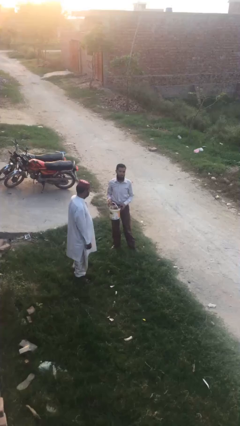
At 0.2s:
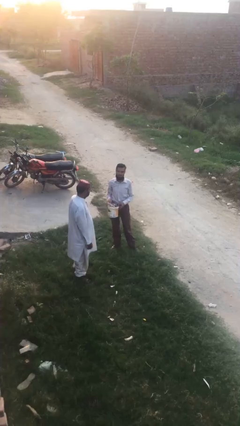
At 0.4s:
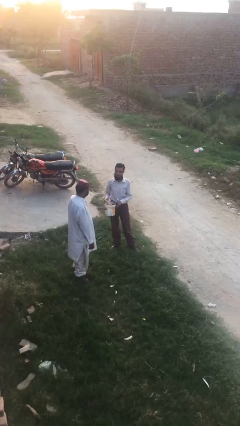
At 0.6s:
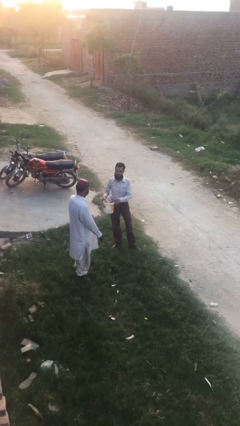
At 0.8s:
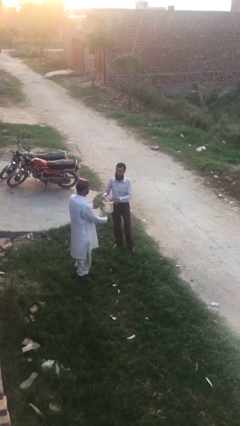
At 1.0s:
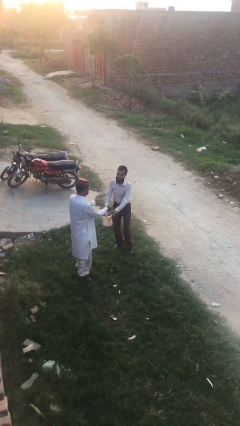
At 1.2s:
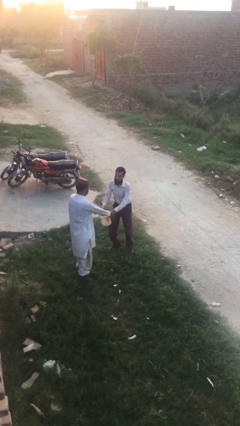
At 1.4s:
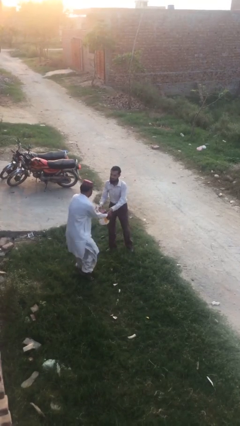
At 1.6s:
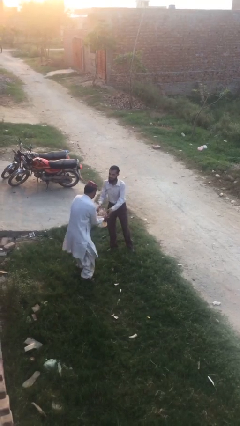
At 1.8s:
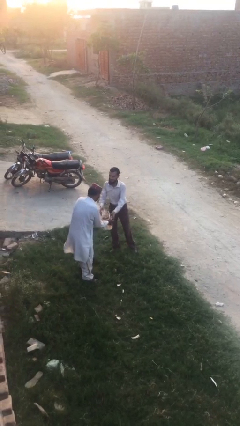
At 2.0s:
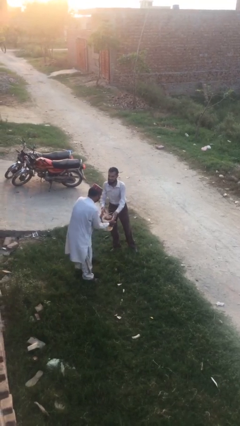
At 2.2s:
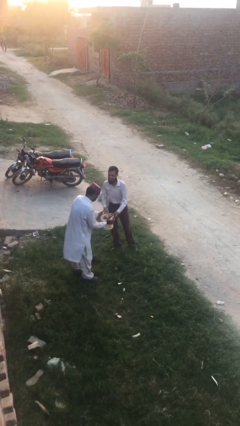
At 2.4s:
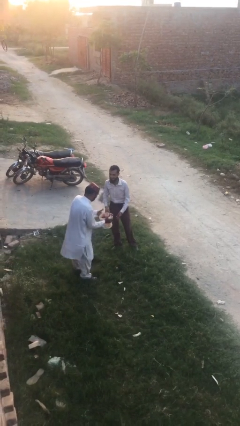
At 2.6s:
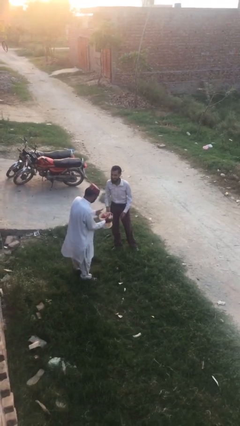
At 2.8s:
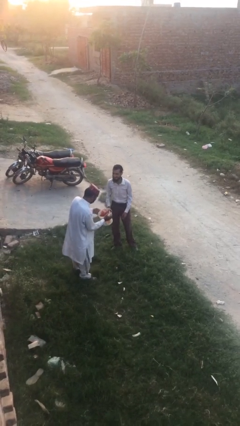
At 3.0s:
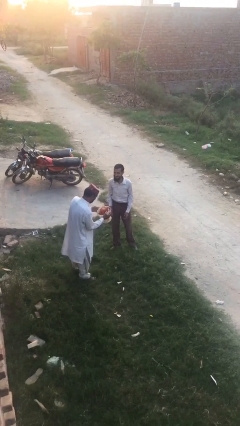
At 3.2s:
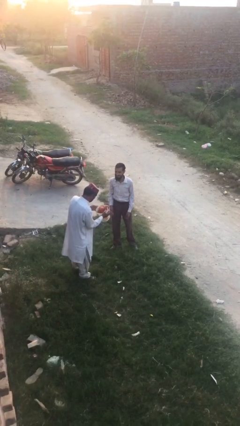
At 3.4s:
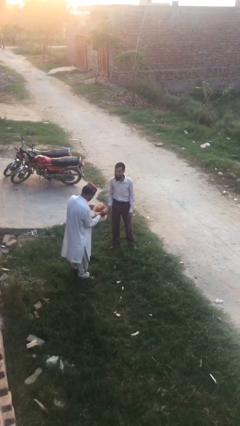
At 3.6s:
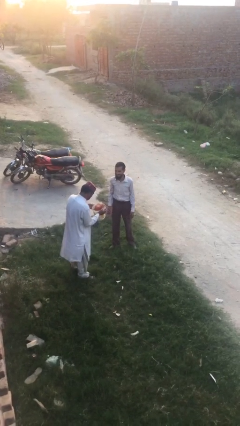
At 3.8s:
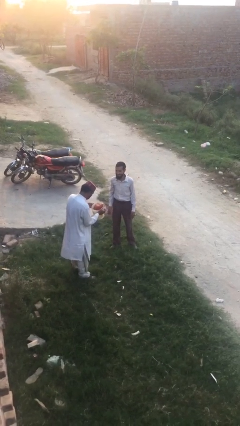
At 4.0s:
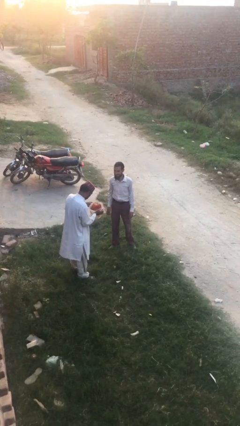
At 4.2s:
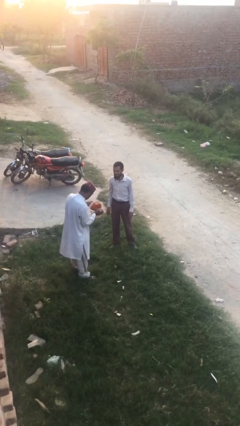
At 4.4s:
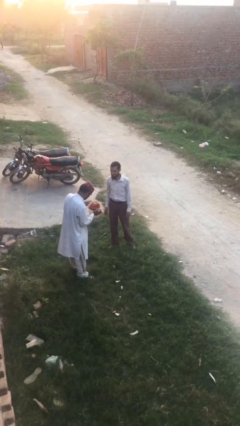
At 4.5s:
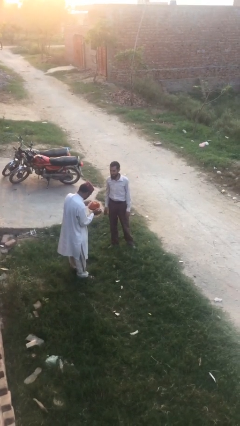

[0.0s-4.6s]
person transfers object to person

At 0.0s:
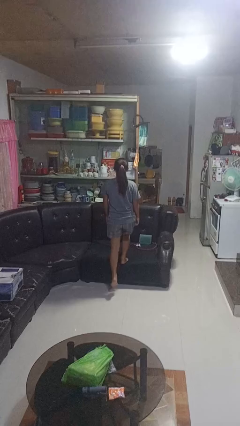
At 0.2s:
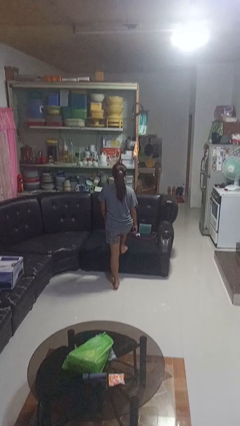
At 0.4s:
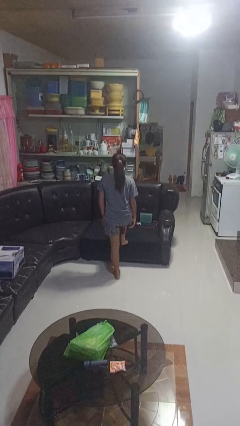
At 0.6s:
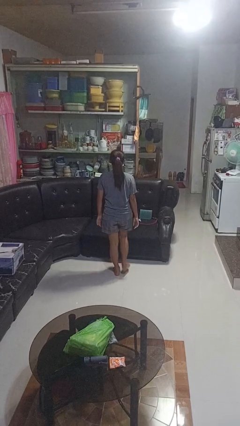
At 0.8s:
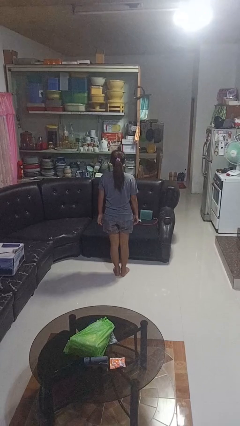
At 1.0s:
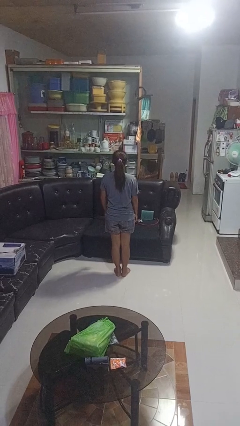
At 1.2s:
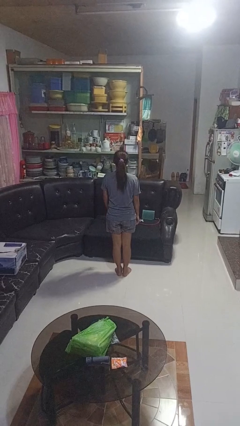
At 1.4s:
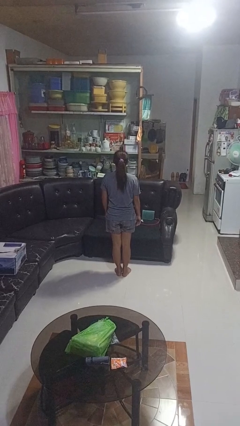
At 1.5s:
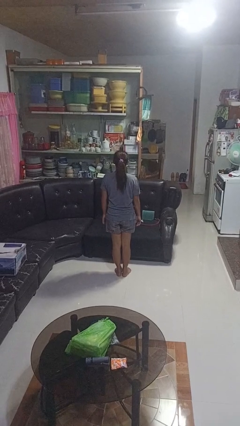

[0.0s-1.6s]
person climbs off couch

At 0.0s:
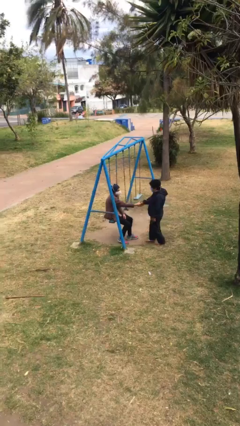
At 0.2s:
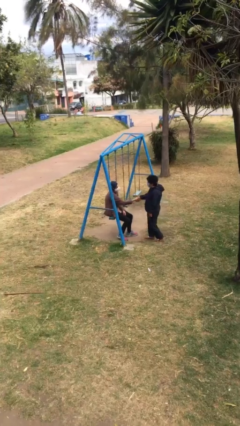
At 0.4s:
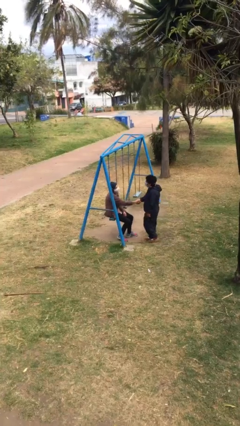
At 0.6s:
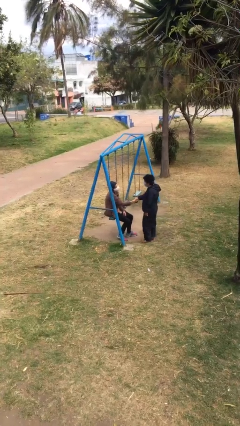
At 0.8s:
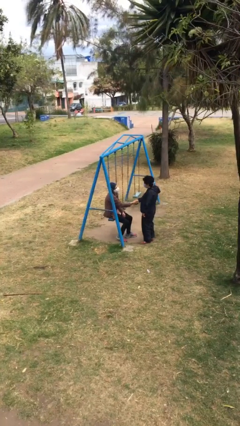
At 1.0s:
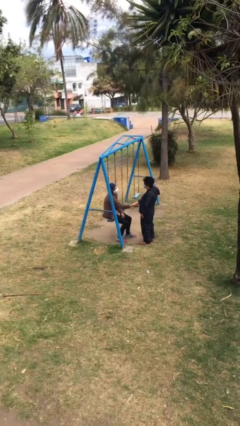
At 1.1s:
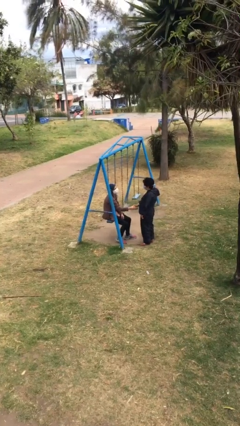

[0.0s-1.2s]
person shakes hand

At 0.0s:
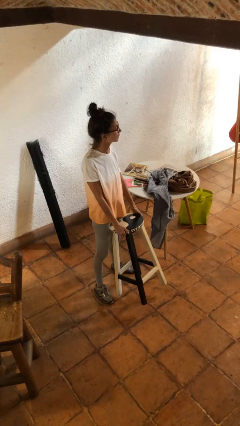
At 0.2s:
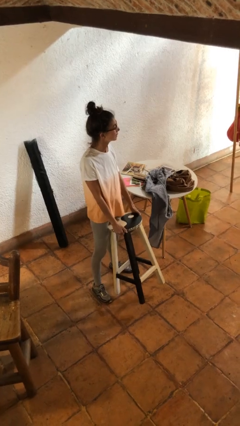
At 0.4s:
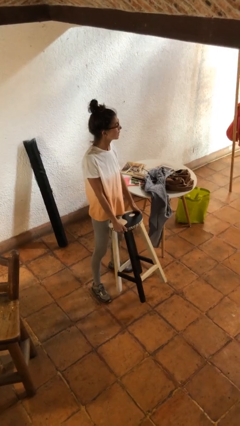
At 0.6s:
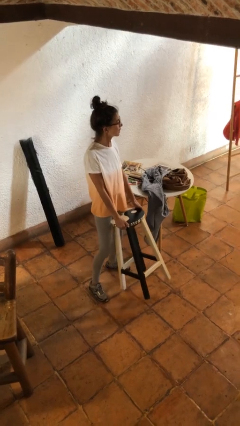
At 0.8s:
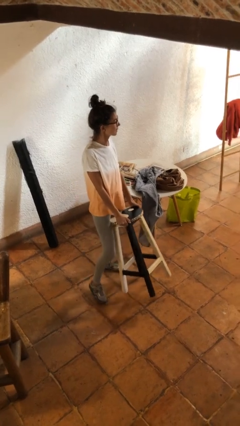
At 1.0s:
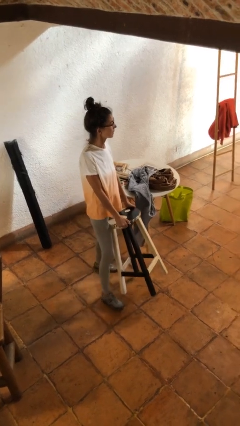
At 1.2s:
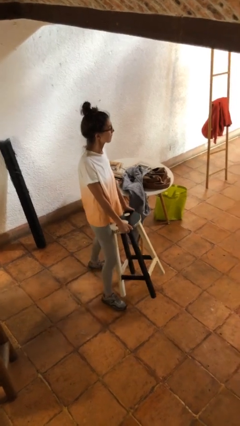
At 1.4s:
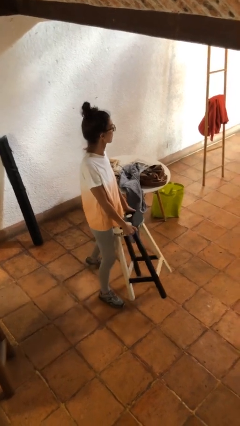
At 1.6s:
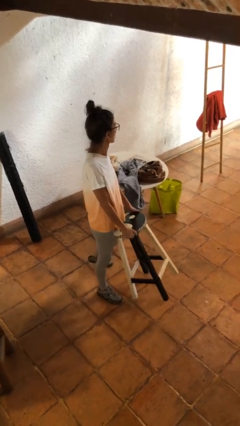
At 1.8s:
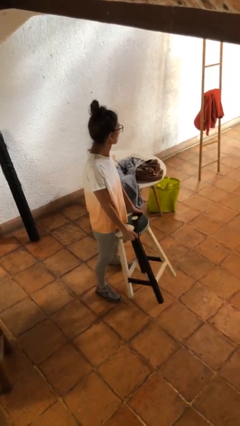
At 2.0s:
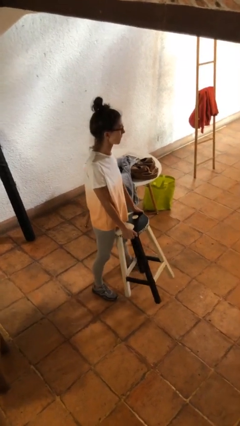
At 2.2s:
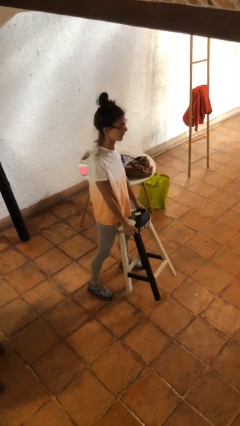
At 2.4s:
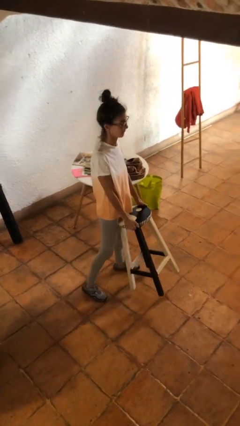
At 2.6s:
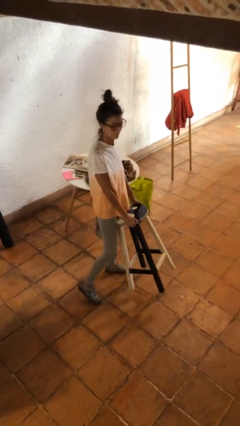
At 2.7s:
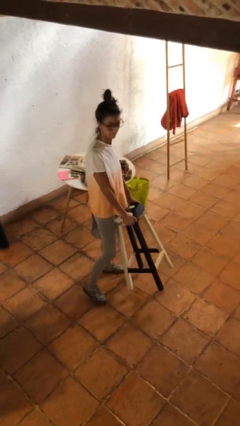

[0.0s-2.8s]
person carries furniture

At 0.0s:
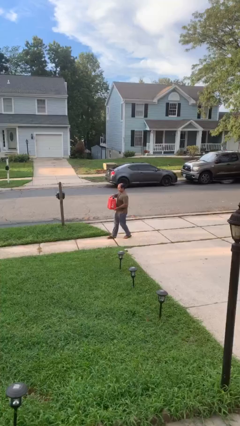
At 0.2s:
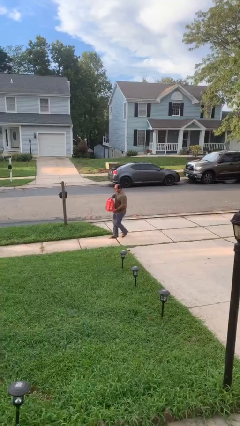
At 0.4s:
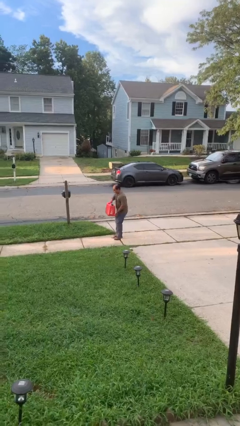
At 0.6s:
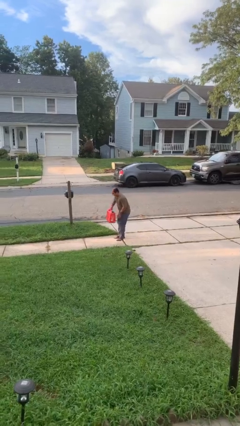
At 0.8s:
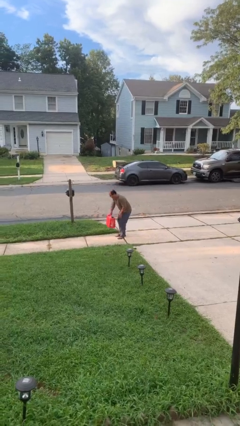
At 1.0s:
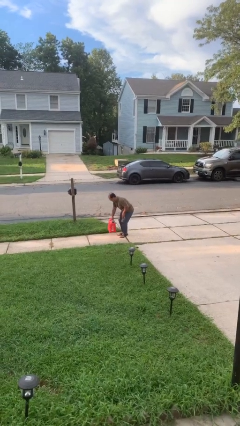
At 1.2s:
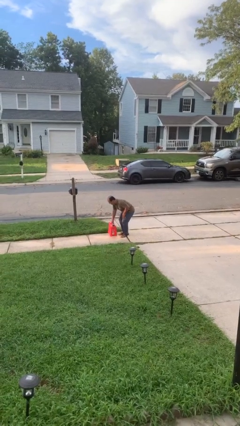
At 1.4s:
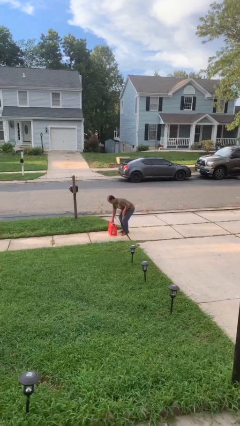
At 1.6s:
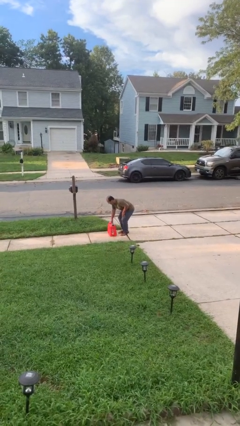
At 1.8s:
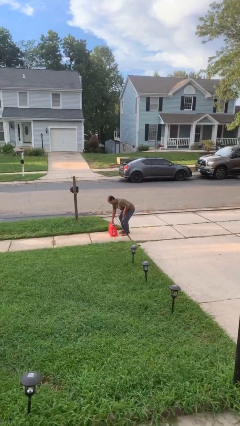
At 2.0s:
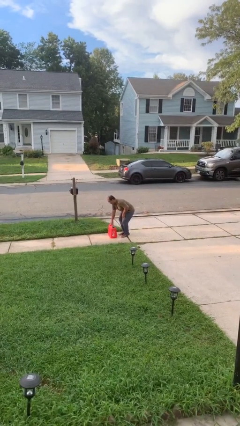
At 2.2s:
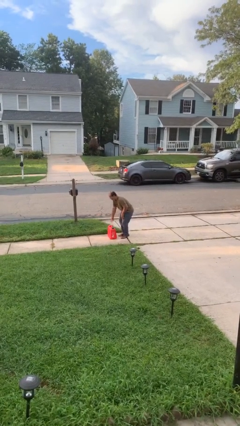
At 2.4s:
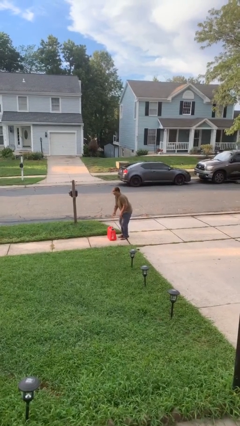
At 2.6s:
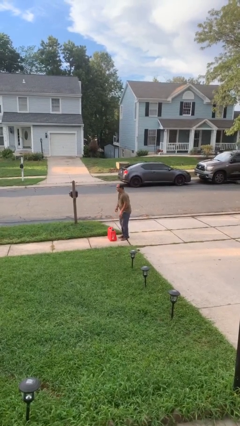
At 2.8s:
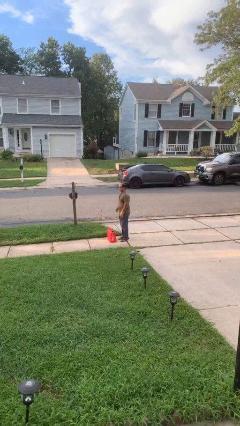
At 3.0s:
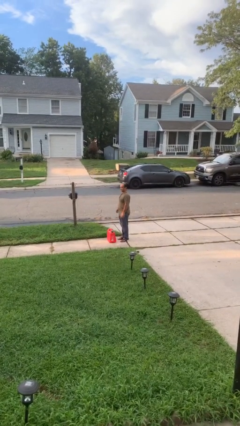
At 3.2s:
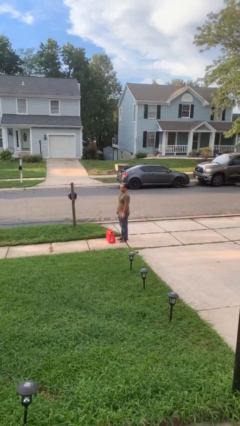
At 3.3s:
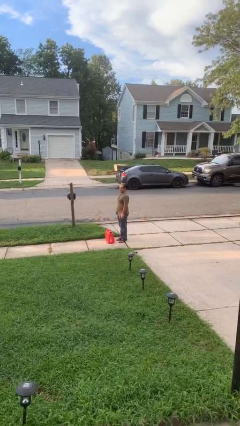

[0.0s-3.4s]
person puts down object on floor

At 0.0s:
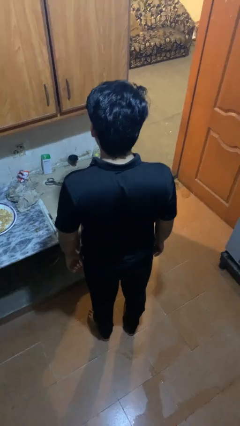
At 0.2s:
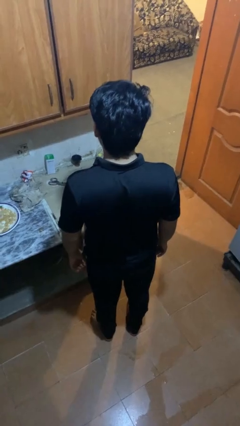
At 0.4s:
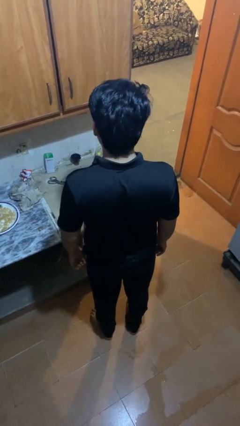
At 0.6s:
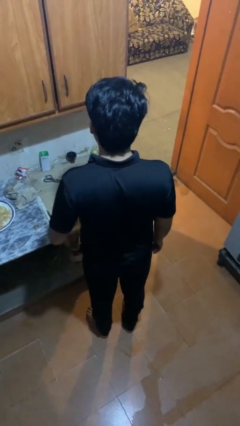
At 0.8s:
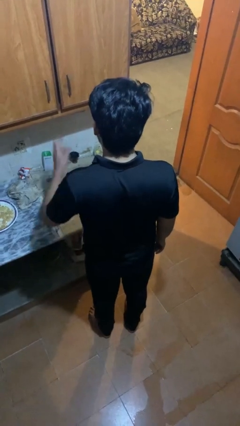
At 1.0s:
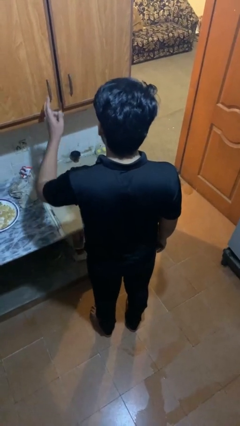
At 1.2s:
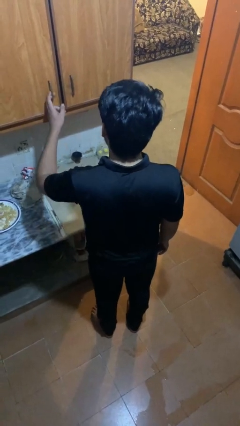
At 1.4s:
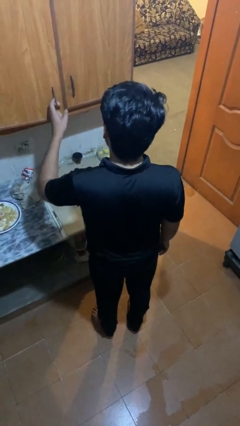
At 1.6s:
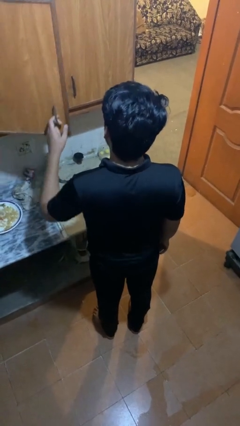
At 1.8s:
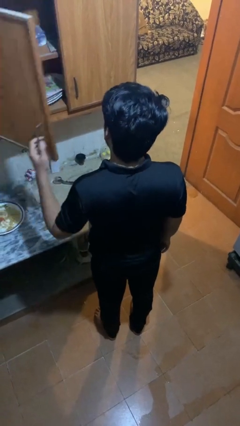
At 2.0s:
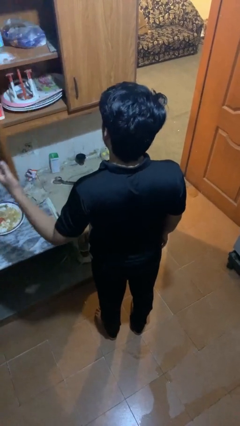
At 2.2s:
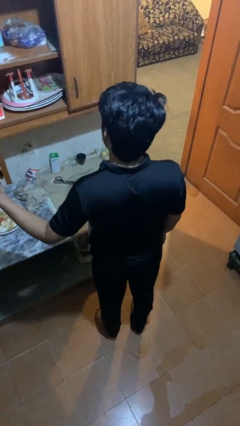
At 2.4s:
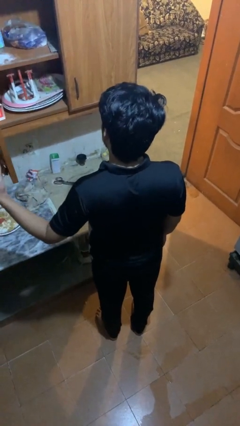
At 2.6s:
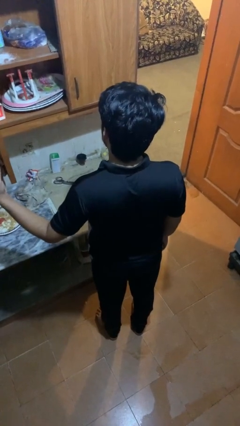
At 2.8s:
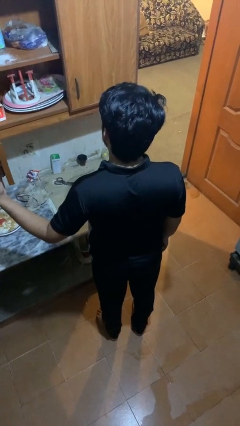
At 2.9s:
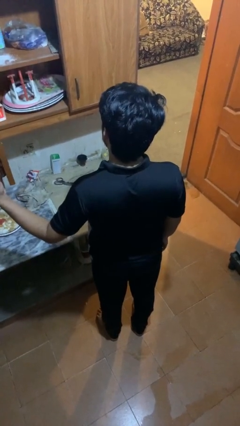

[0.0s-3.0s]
person opens cabinet

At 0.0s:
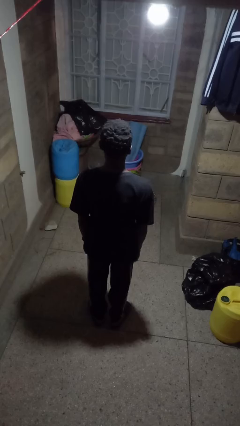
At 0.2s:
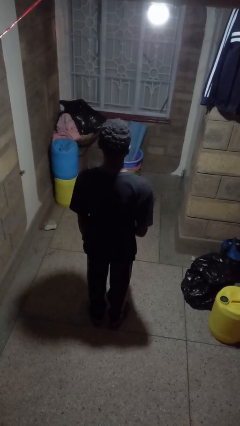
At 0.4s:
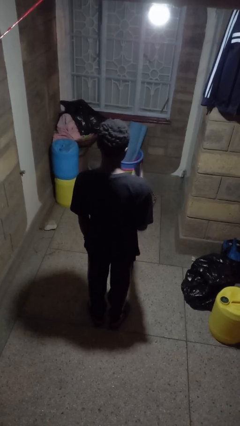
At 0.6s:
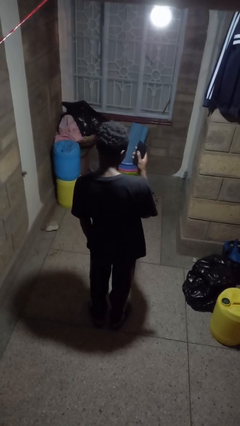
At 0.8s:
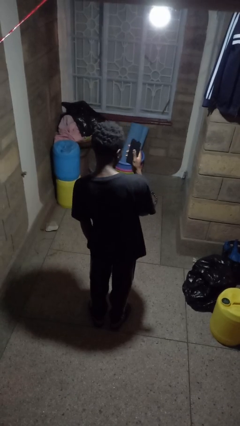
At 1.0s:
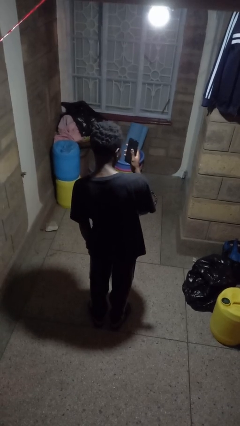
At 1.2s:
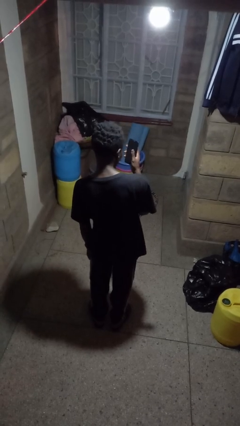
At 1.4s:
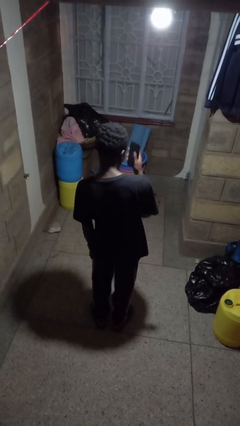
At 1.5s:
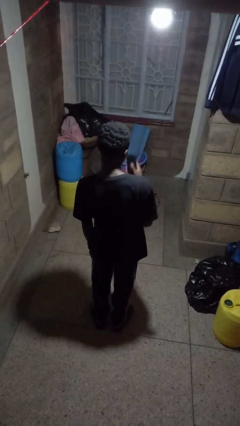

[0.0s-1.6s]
person takes selfie
